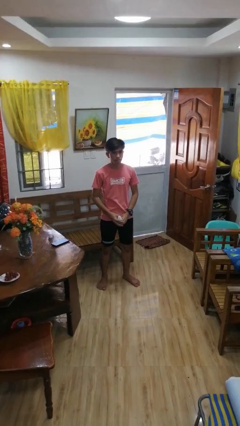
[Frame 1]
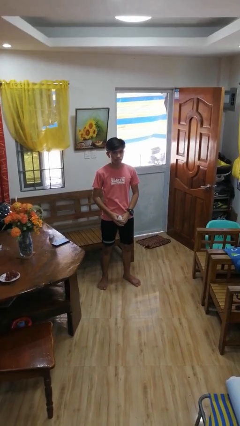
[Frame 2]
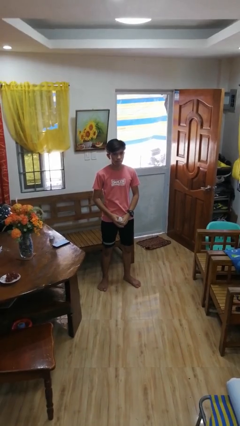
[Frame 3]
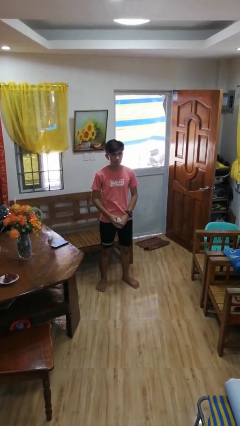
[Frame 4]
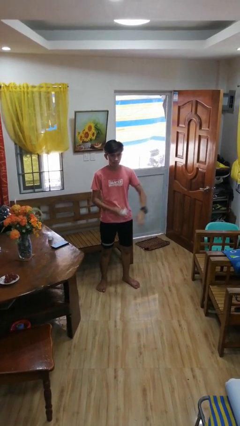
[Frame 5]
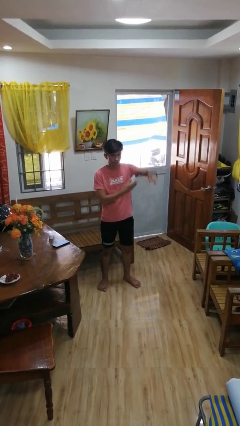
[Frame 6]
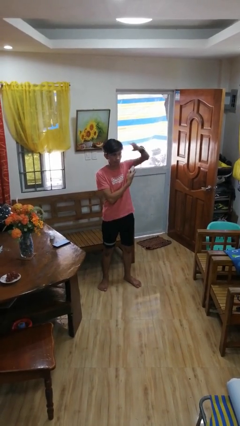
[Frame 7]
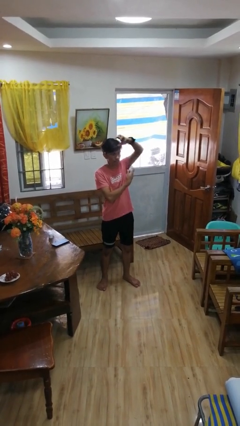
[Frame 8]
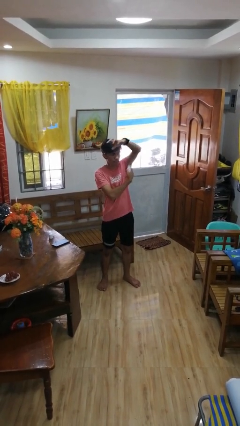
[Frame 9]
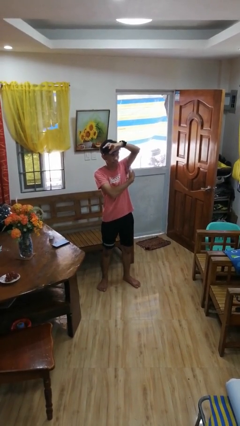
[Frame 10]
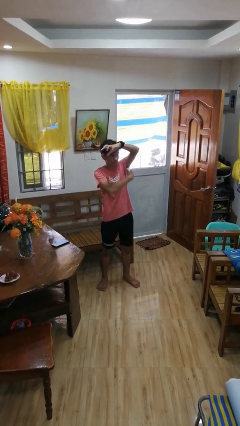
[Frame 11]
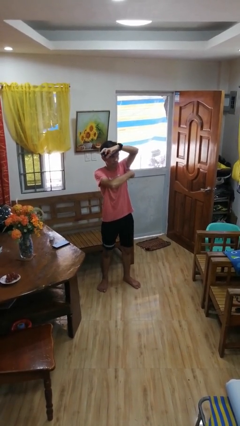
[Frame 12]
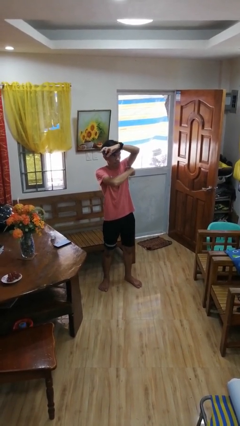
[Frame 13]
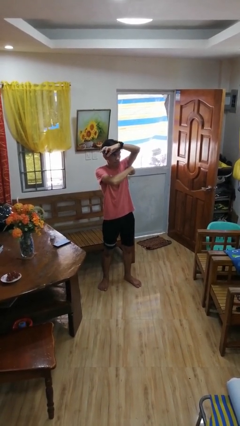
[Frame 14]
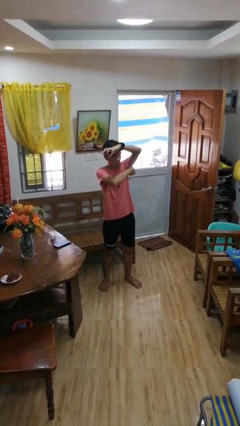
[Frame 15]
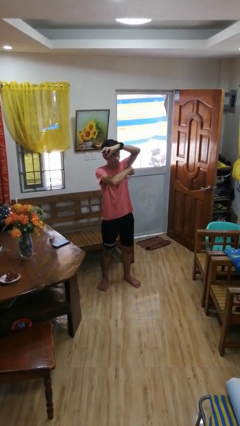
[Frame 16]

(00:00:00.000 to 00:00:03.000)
person applies deodorant

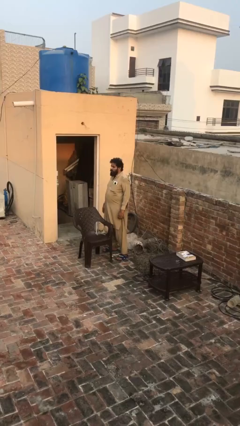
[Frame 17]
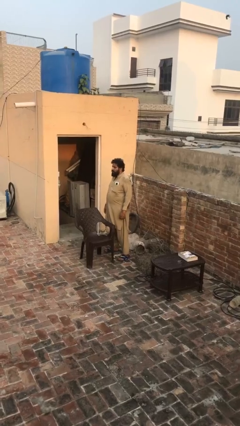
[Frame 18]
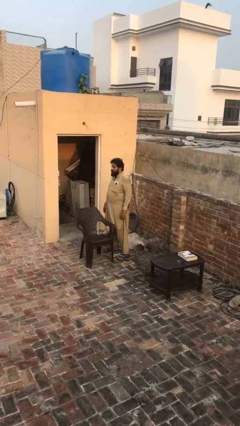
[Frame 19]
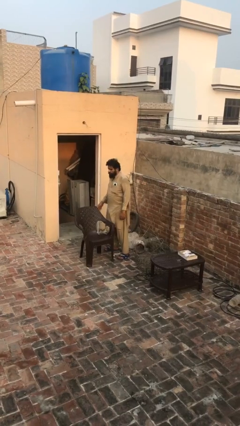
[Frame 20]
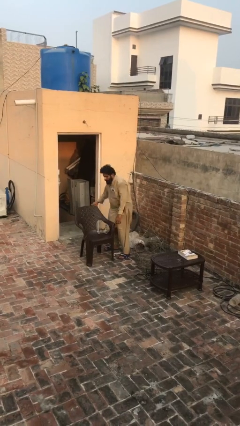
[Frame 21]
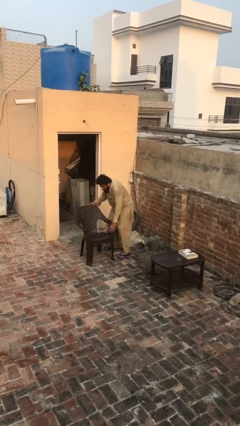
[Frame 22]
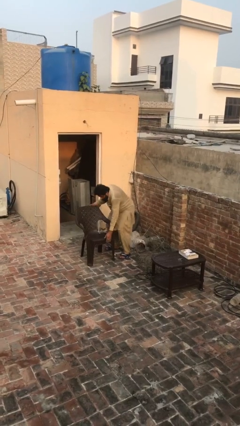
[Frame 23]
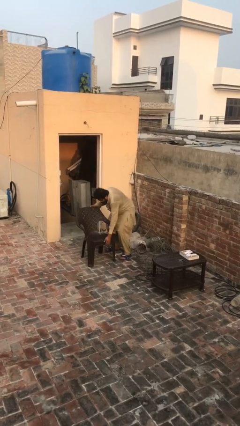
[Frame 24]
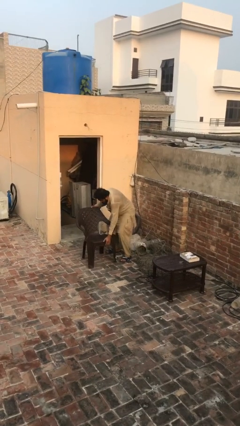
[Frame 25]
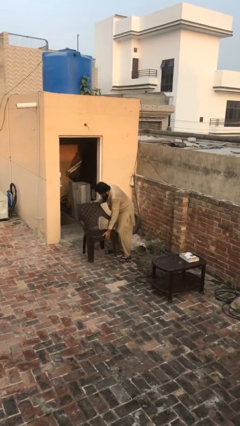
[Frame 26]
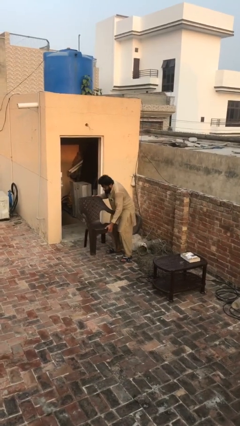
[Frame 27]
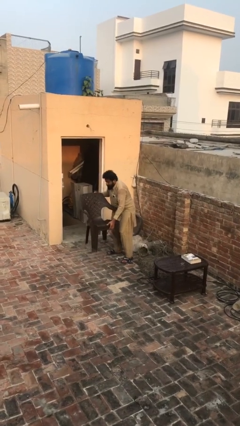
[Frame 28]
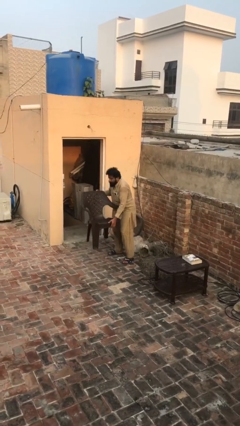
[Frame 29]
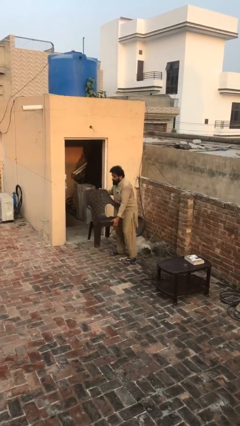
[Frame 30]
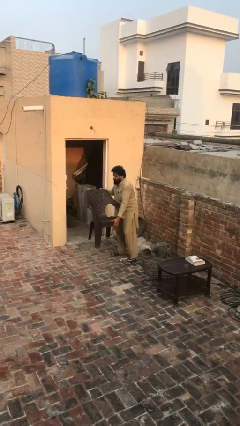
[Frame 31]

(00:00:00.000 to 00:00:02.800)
person picks up object from floor

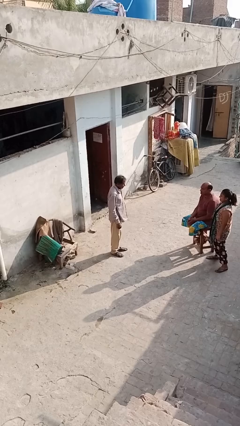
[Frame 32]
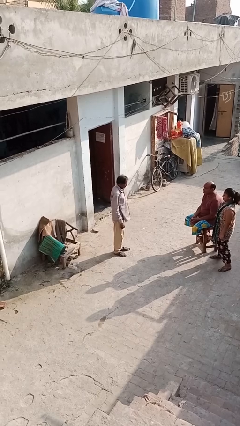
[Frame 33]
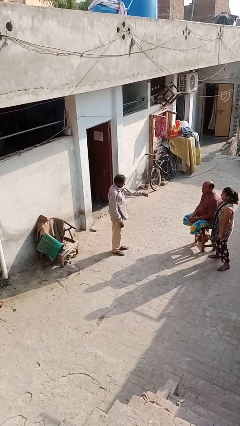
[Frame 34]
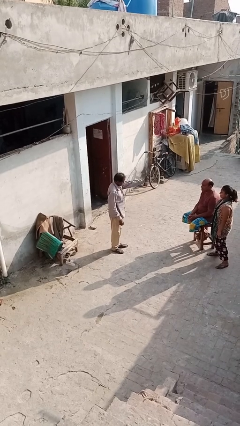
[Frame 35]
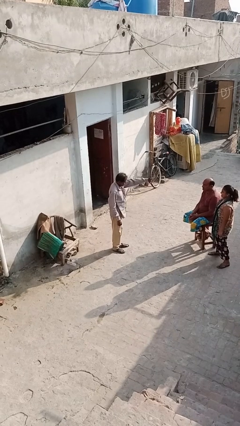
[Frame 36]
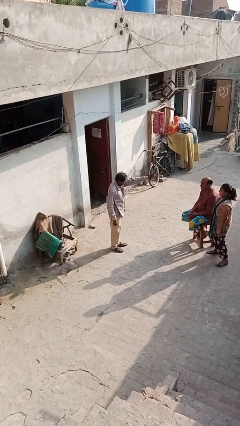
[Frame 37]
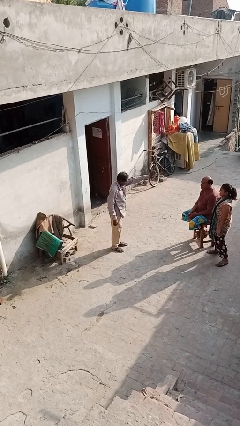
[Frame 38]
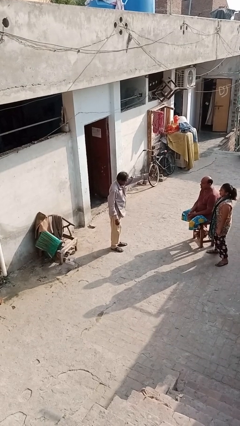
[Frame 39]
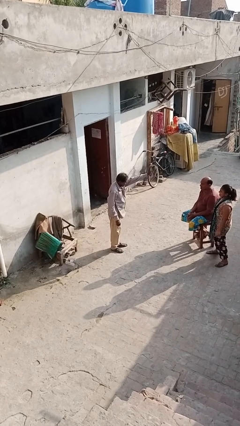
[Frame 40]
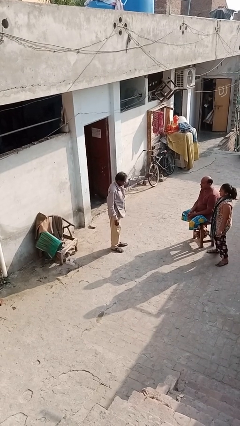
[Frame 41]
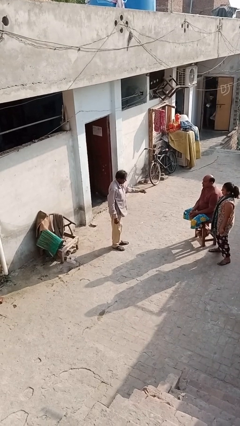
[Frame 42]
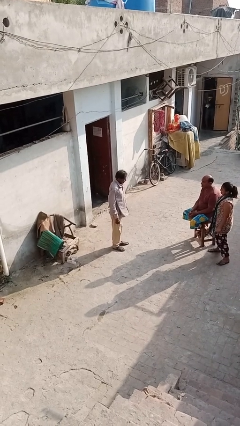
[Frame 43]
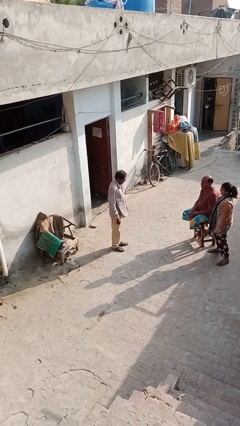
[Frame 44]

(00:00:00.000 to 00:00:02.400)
person waves at person

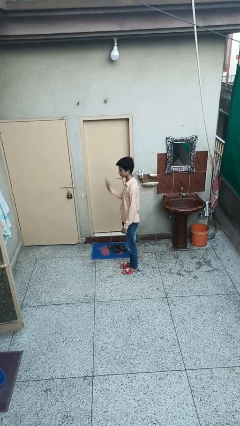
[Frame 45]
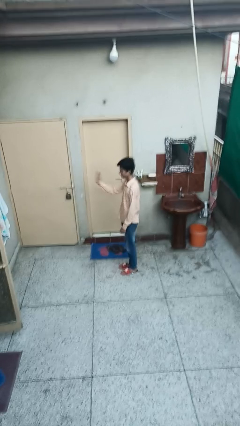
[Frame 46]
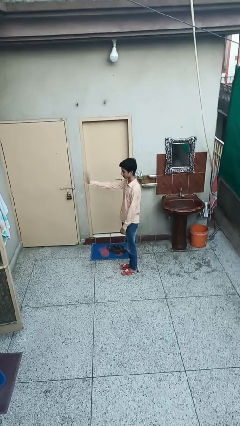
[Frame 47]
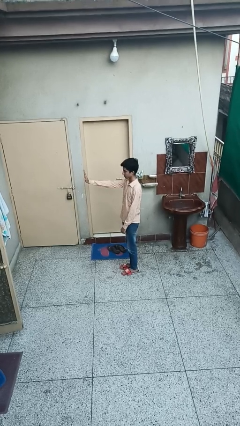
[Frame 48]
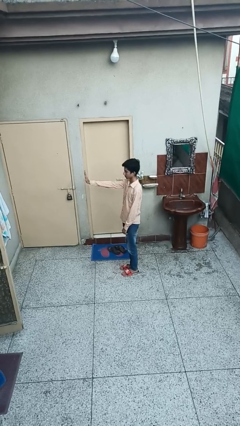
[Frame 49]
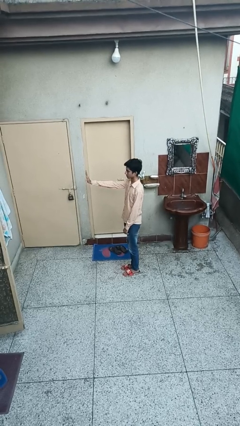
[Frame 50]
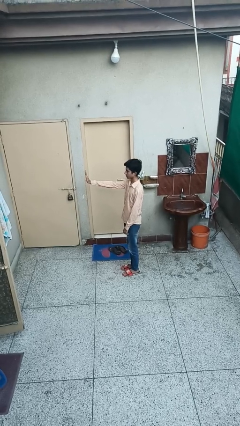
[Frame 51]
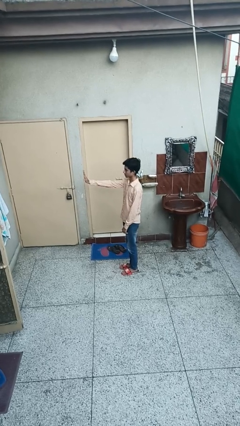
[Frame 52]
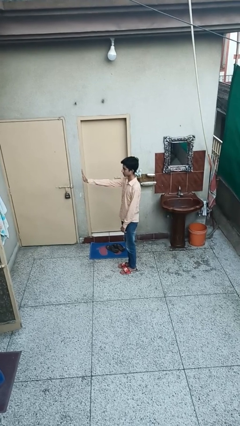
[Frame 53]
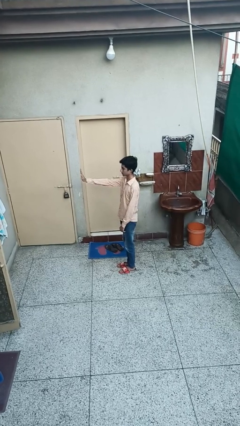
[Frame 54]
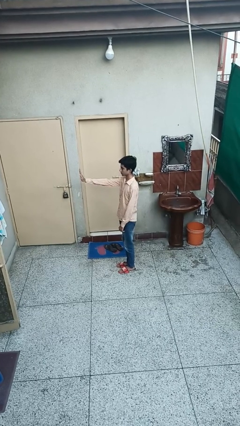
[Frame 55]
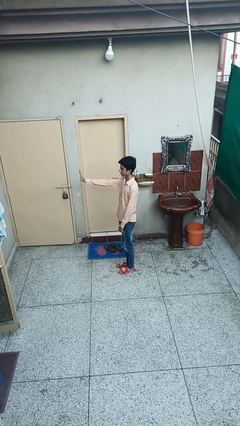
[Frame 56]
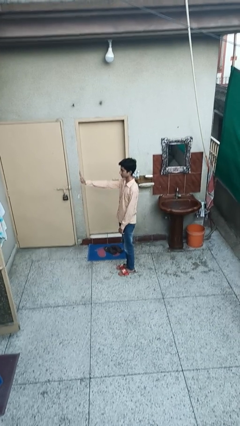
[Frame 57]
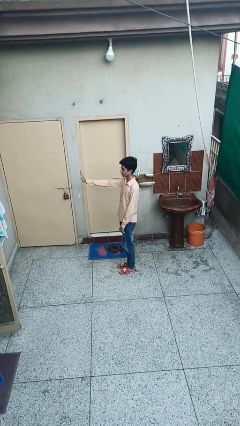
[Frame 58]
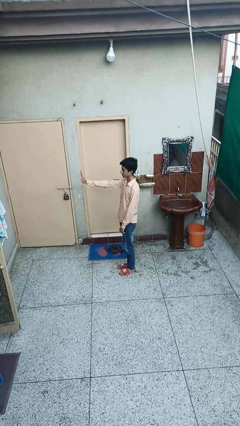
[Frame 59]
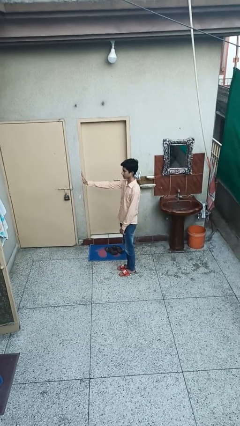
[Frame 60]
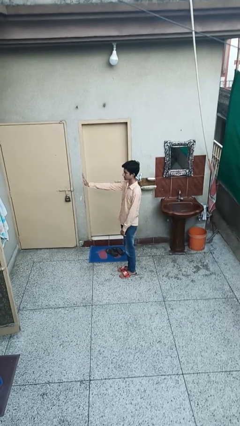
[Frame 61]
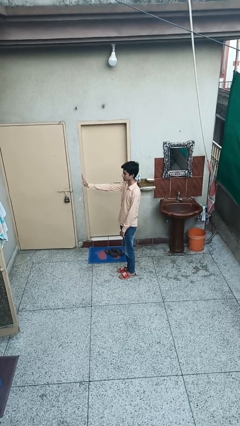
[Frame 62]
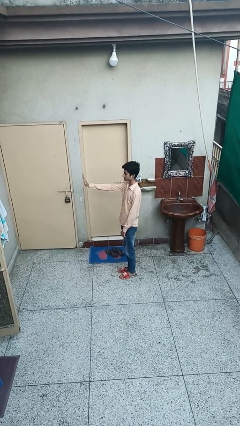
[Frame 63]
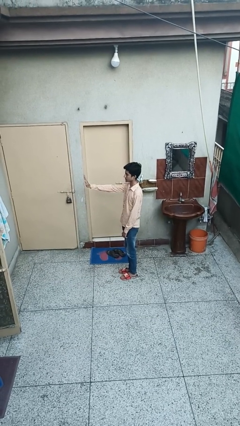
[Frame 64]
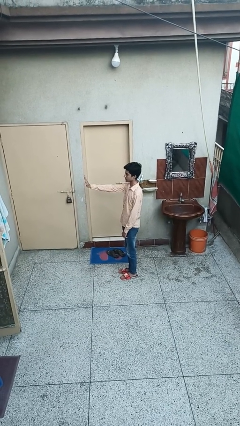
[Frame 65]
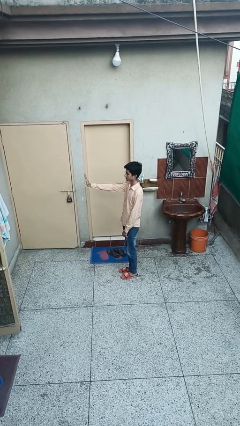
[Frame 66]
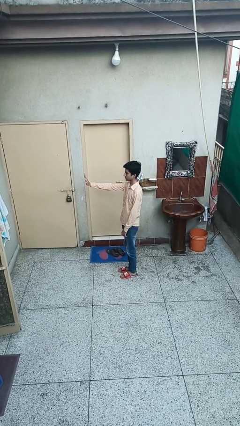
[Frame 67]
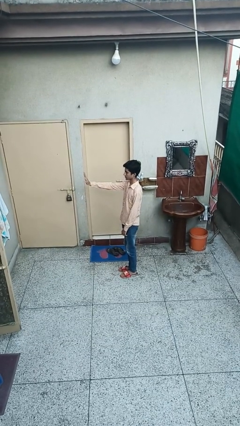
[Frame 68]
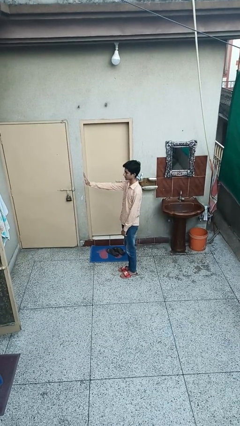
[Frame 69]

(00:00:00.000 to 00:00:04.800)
person gestures stop

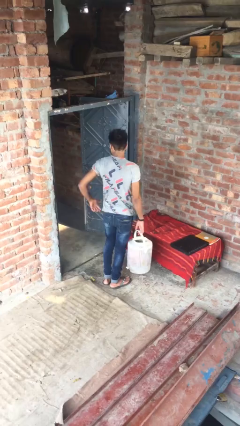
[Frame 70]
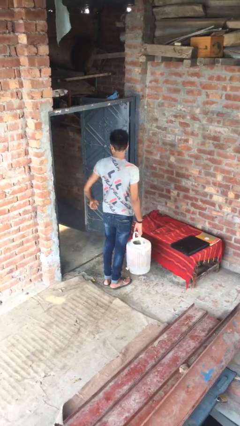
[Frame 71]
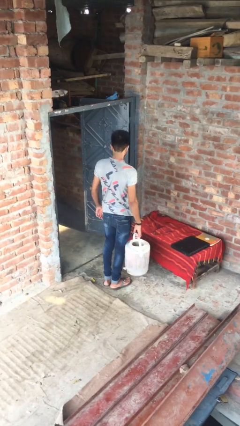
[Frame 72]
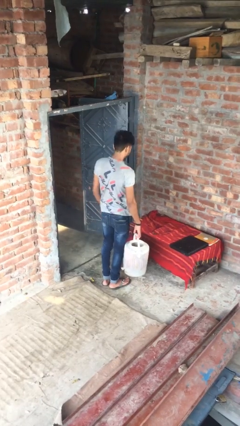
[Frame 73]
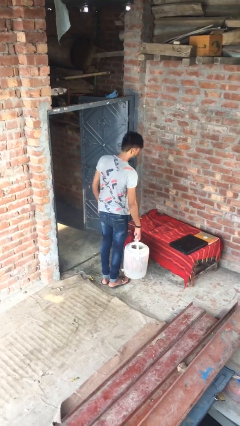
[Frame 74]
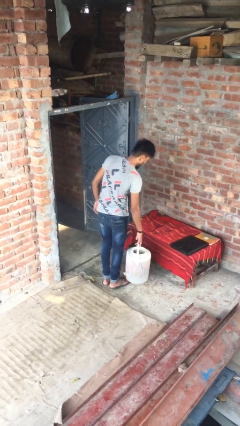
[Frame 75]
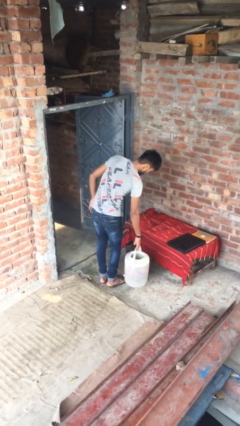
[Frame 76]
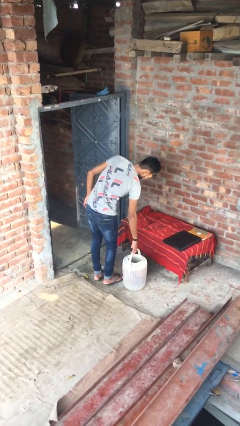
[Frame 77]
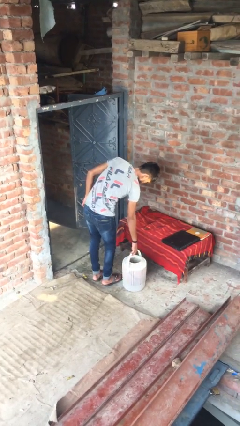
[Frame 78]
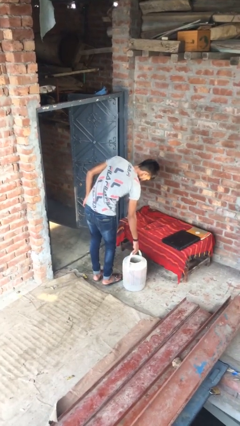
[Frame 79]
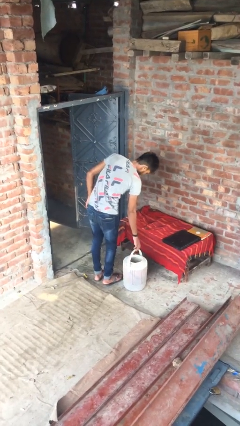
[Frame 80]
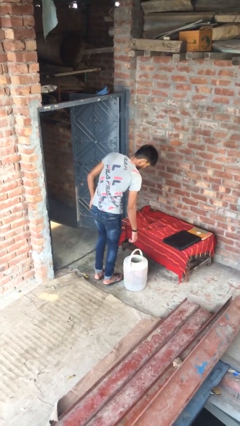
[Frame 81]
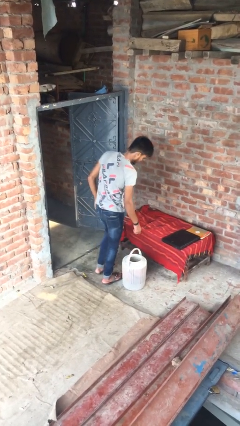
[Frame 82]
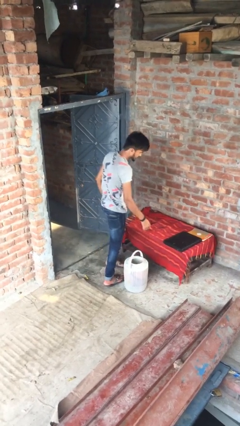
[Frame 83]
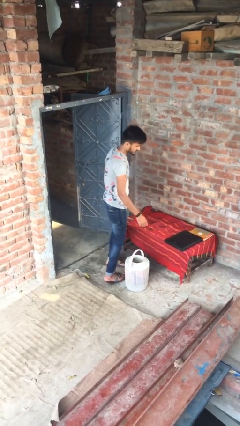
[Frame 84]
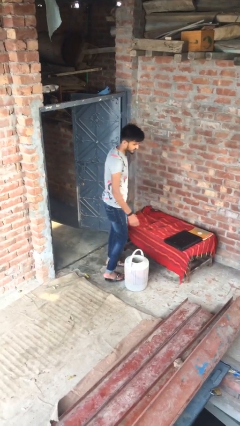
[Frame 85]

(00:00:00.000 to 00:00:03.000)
person puts down object on floor

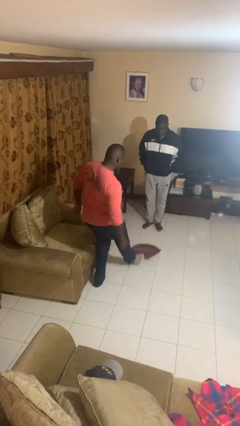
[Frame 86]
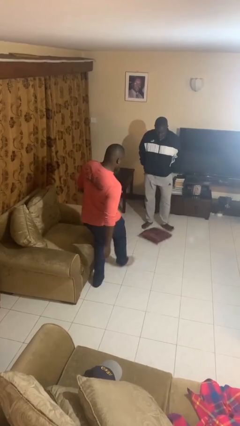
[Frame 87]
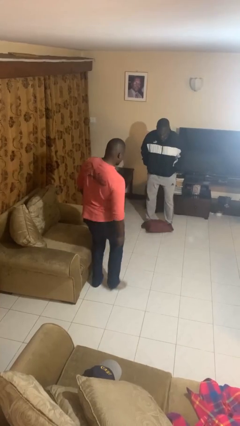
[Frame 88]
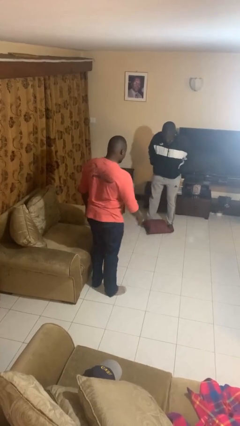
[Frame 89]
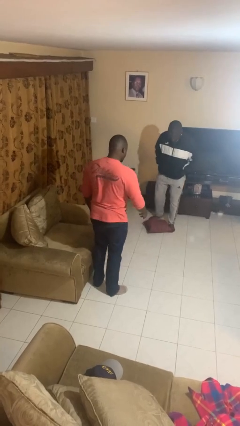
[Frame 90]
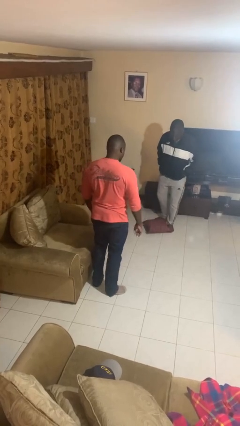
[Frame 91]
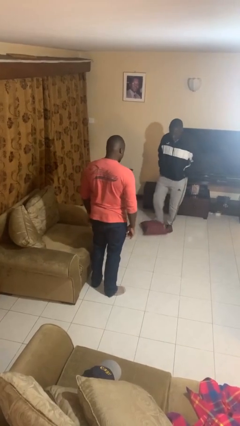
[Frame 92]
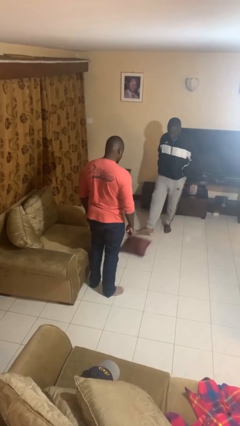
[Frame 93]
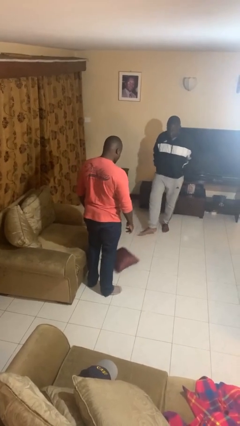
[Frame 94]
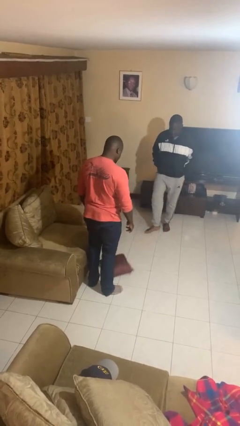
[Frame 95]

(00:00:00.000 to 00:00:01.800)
person kicks object to person
